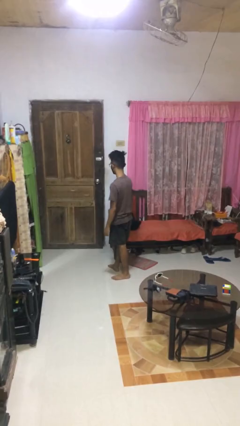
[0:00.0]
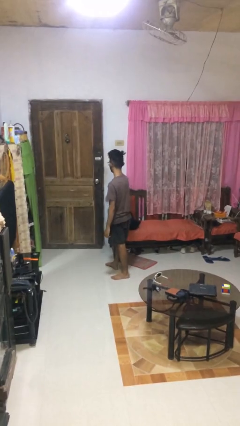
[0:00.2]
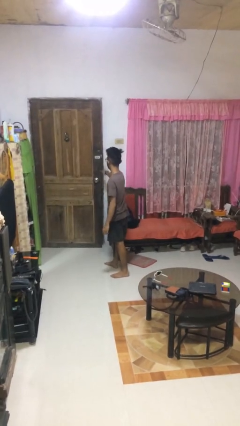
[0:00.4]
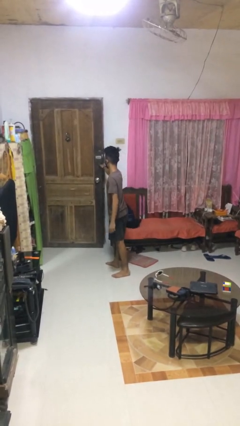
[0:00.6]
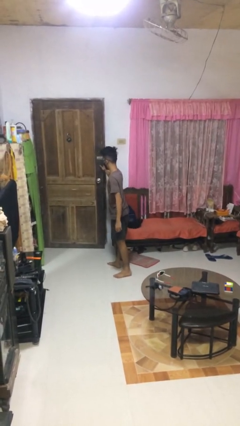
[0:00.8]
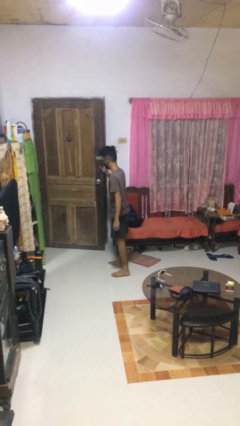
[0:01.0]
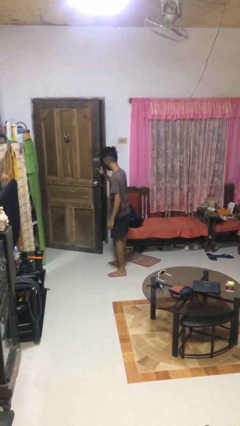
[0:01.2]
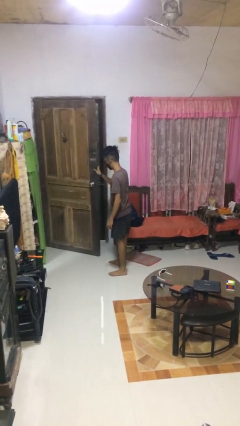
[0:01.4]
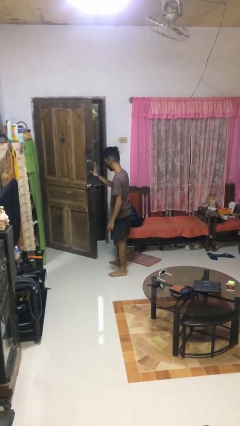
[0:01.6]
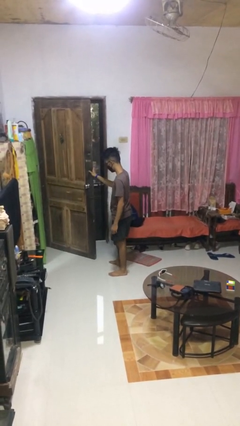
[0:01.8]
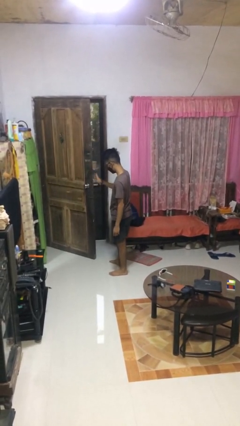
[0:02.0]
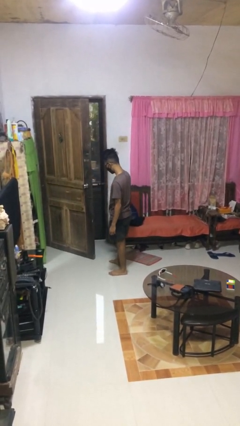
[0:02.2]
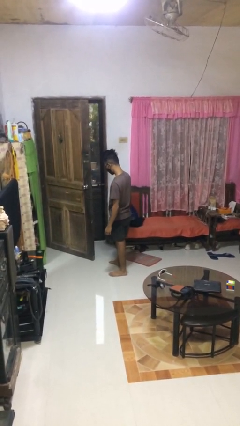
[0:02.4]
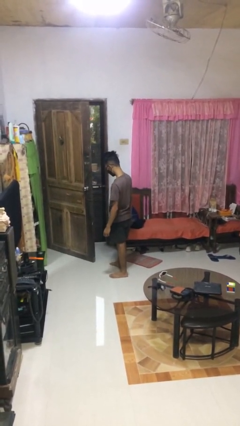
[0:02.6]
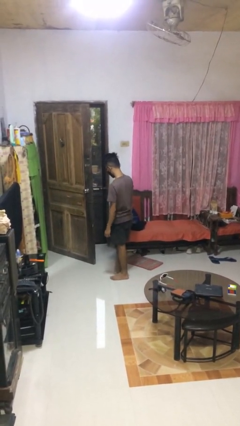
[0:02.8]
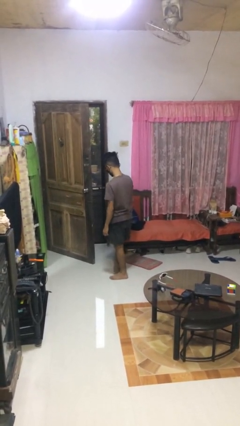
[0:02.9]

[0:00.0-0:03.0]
person opens facility door

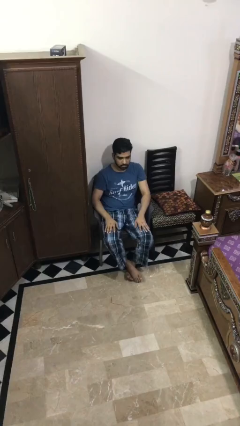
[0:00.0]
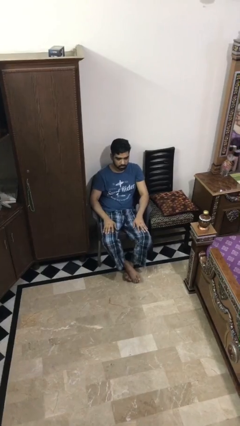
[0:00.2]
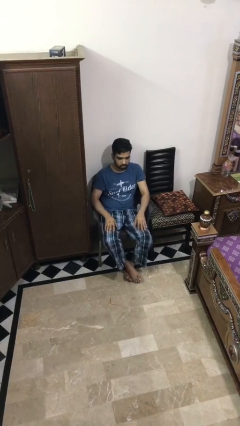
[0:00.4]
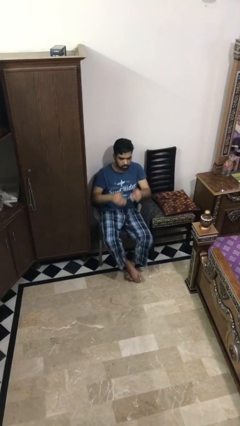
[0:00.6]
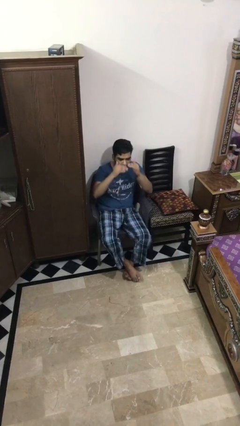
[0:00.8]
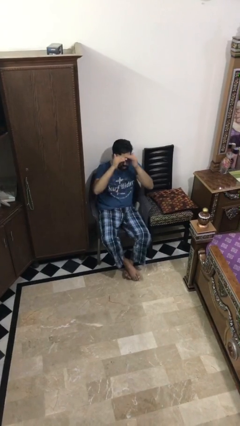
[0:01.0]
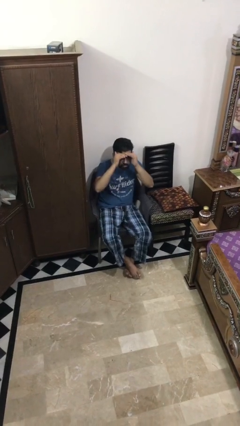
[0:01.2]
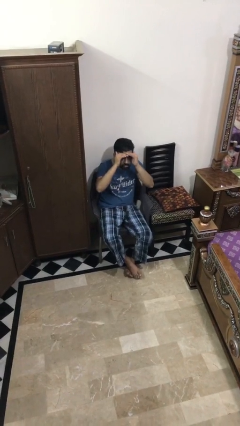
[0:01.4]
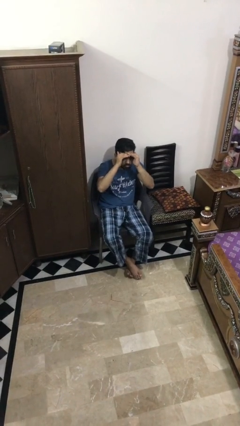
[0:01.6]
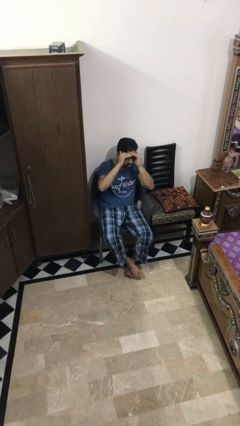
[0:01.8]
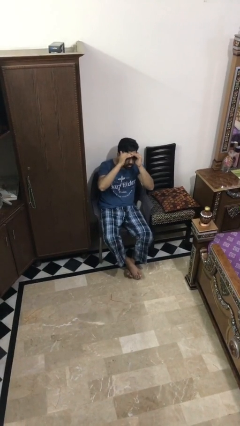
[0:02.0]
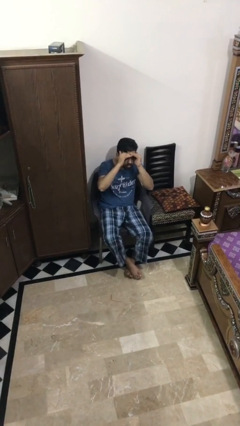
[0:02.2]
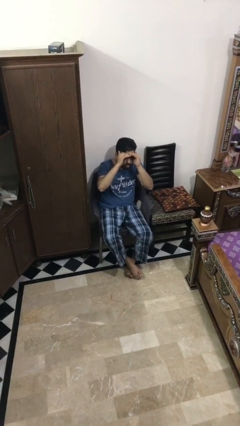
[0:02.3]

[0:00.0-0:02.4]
person shades eyes

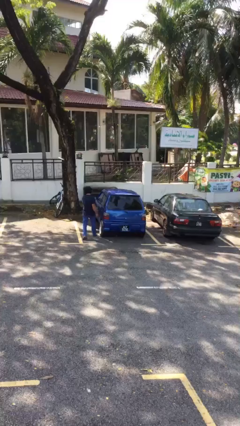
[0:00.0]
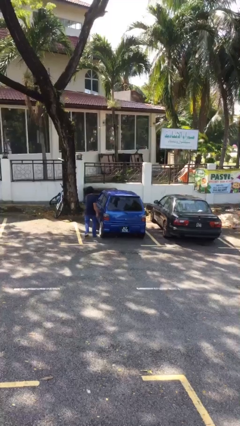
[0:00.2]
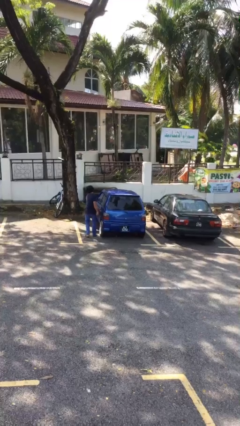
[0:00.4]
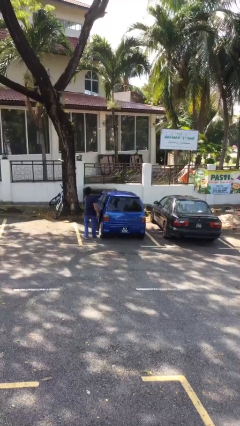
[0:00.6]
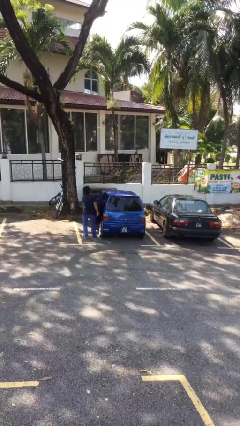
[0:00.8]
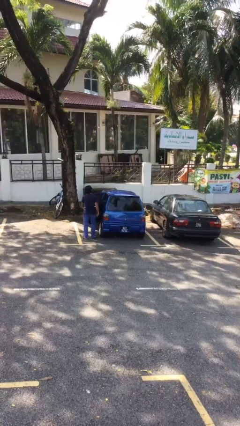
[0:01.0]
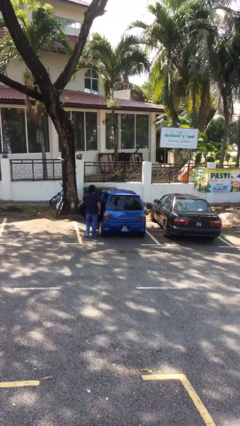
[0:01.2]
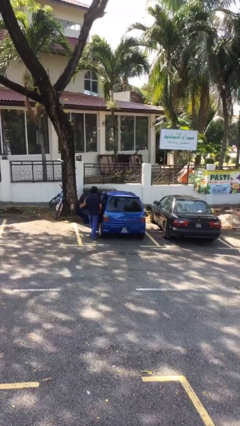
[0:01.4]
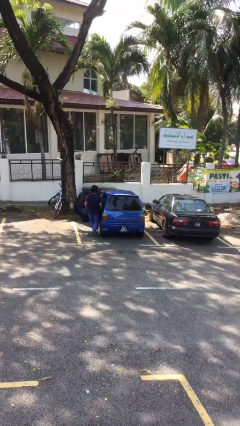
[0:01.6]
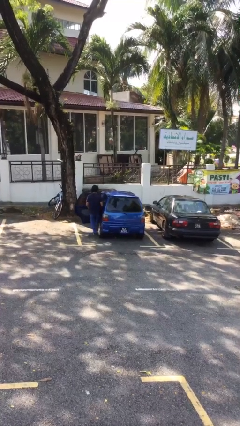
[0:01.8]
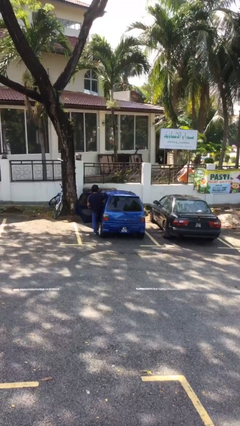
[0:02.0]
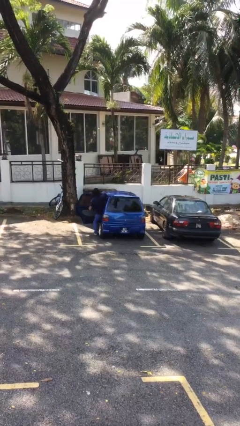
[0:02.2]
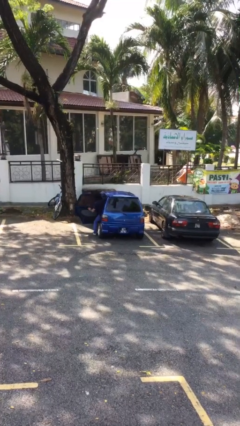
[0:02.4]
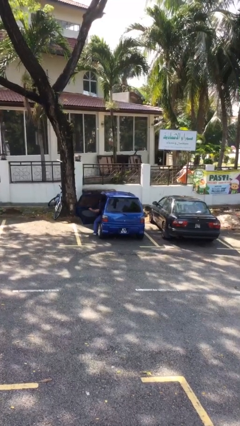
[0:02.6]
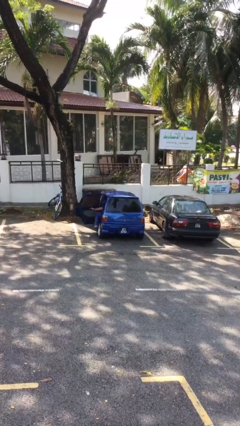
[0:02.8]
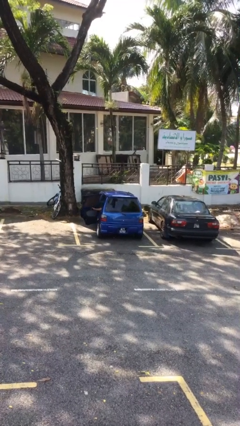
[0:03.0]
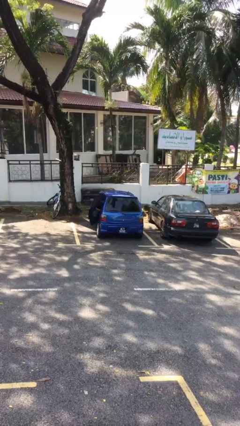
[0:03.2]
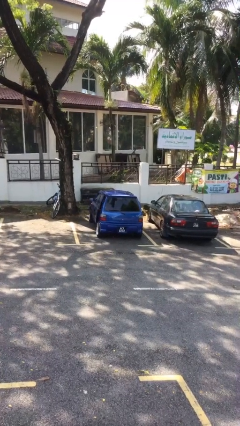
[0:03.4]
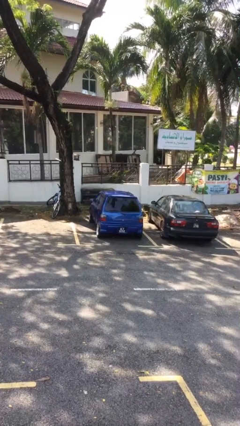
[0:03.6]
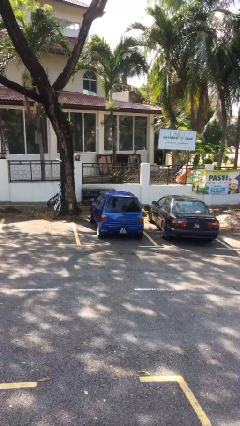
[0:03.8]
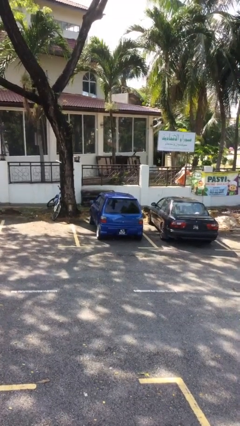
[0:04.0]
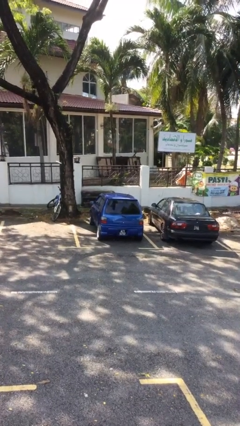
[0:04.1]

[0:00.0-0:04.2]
car picks up person

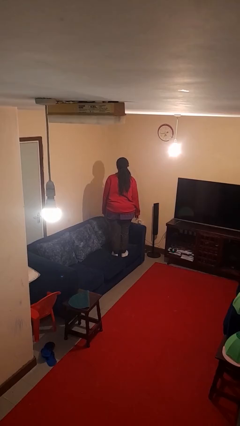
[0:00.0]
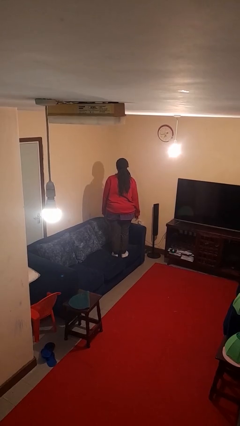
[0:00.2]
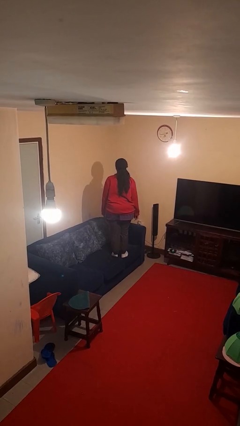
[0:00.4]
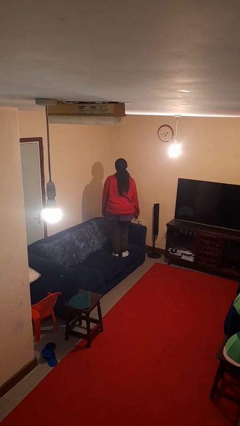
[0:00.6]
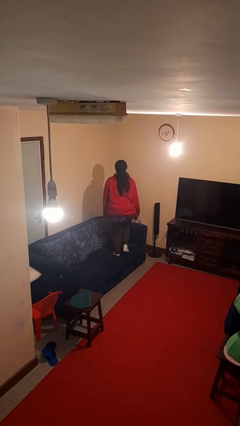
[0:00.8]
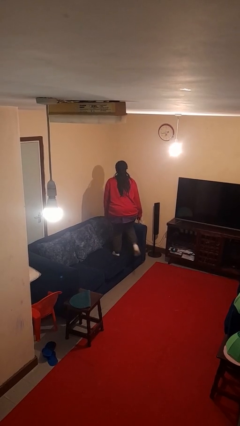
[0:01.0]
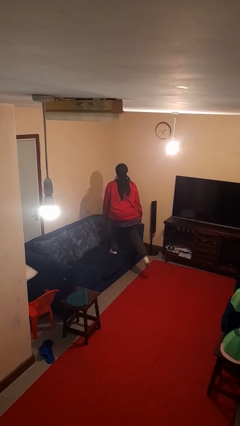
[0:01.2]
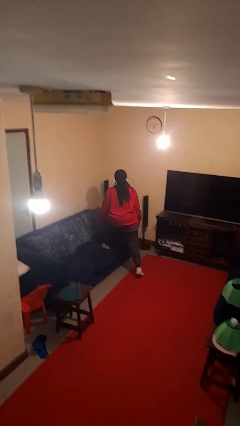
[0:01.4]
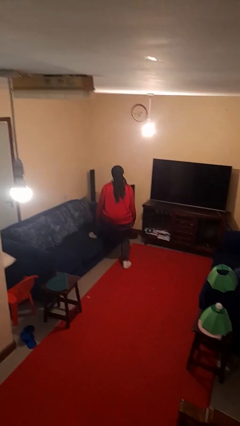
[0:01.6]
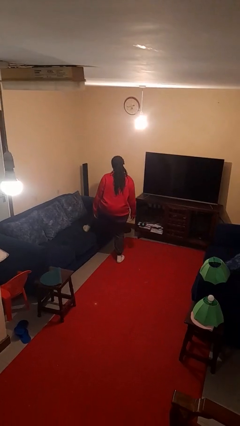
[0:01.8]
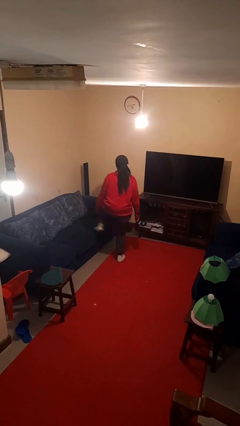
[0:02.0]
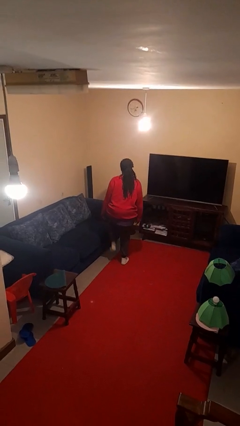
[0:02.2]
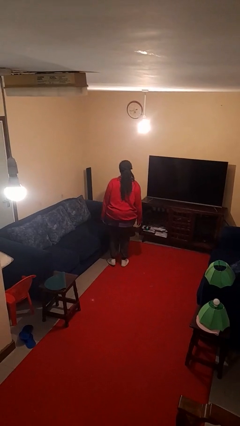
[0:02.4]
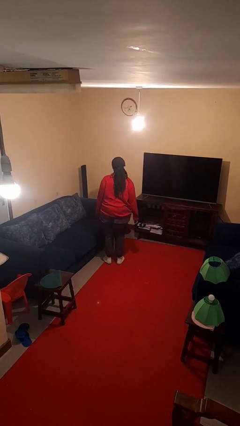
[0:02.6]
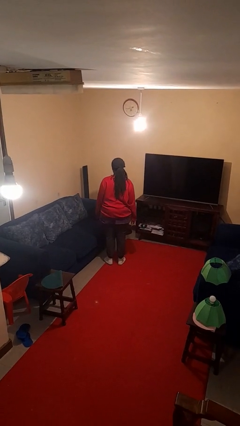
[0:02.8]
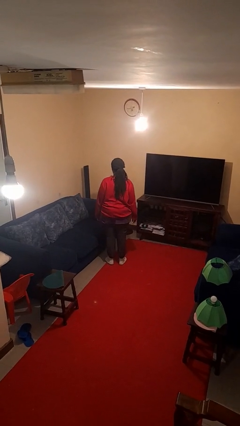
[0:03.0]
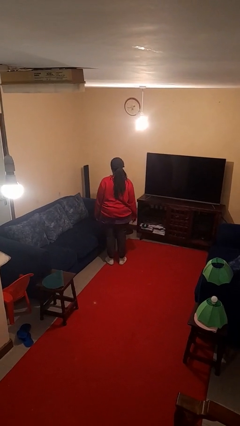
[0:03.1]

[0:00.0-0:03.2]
person climbs off couch

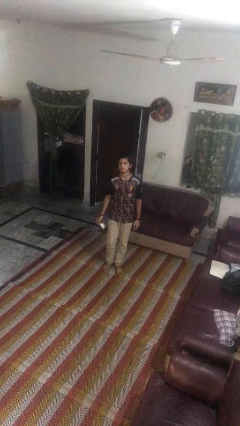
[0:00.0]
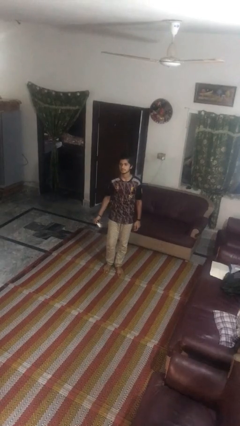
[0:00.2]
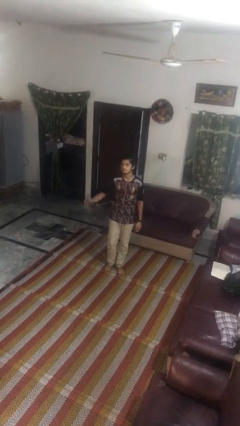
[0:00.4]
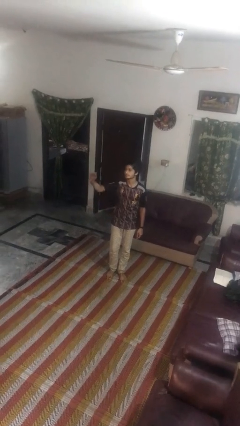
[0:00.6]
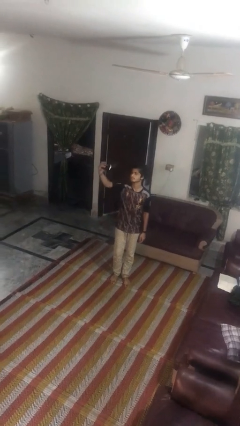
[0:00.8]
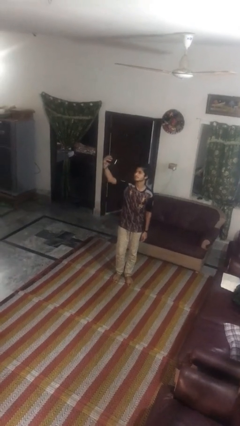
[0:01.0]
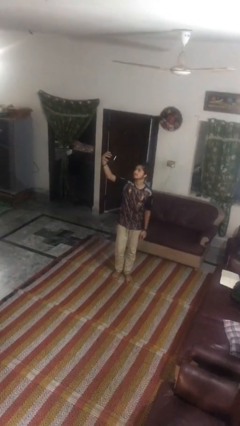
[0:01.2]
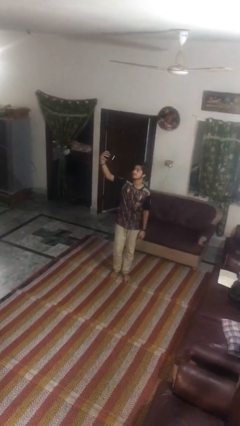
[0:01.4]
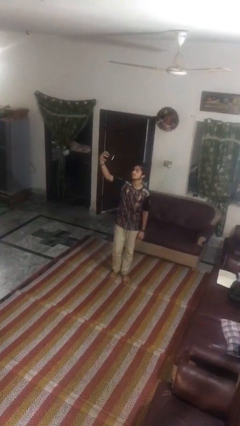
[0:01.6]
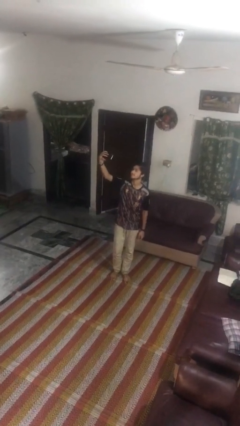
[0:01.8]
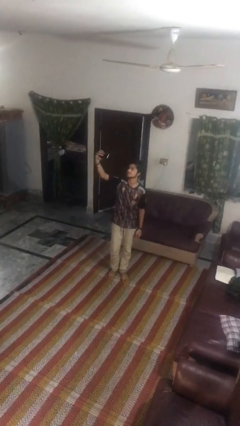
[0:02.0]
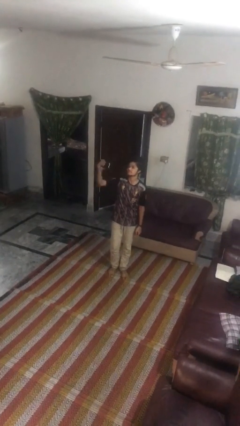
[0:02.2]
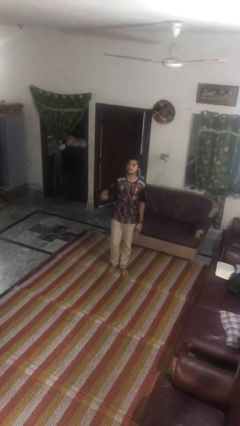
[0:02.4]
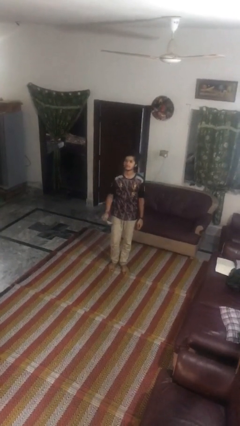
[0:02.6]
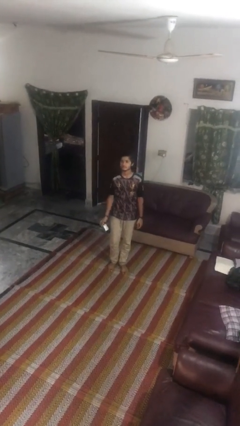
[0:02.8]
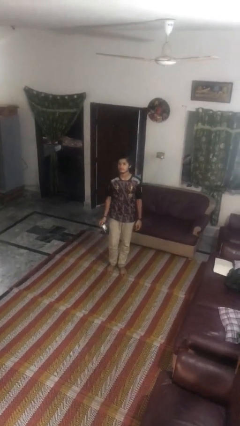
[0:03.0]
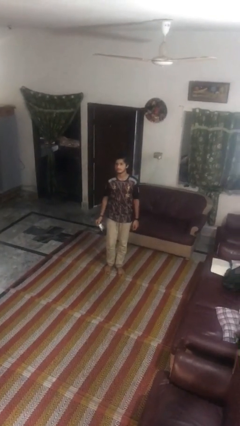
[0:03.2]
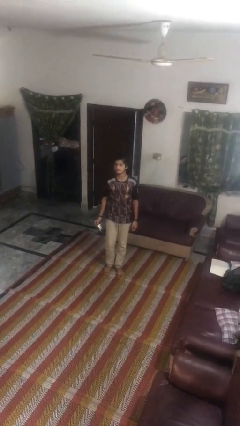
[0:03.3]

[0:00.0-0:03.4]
person takes selfie

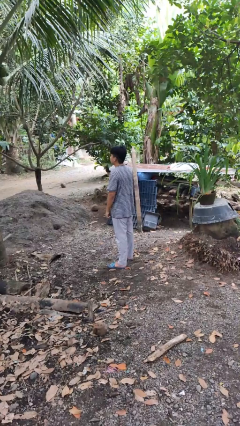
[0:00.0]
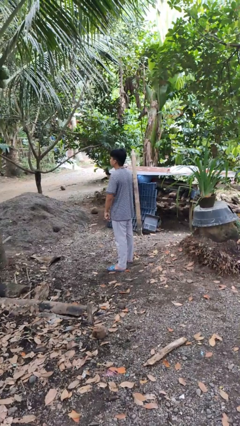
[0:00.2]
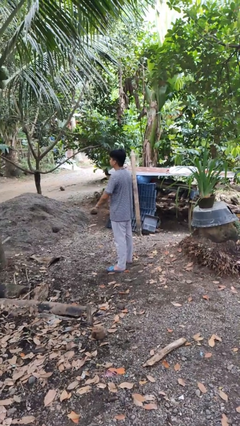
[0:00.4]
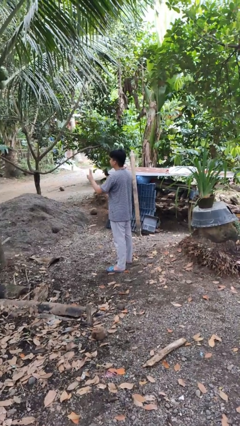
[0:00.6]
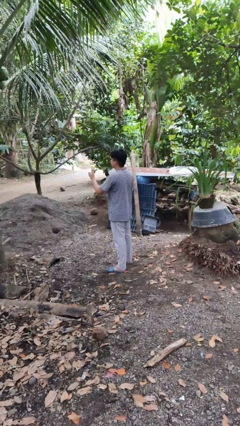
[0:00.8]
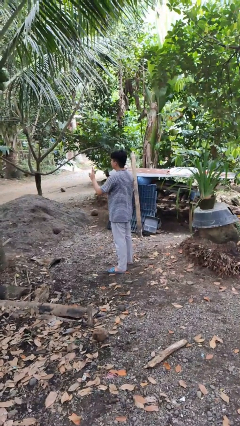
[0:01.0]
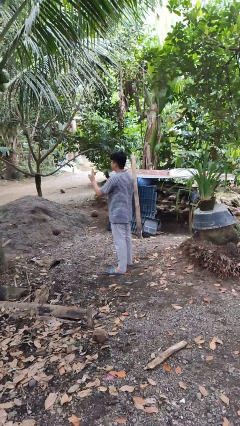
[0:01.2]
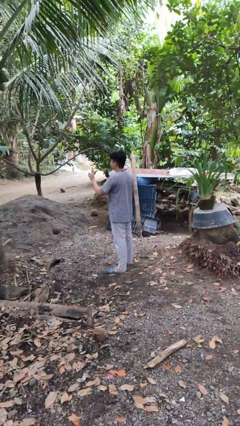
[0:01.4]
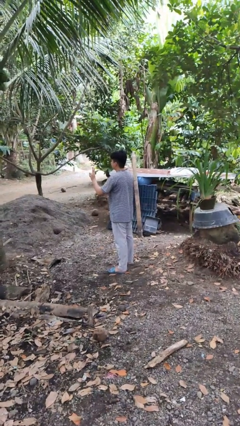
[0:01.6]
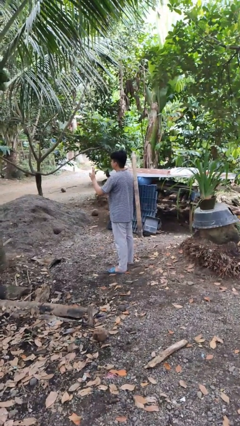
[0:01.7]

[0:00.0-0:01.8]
person gestures peace
